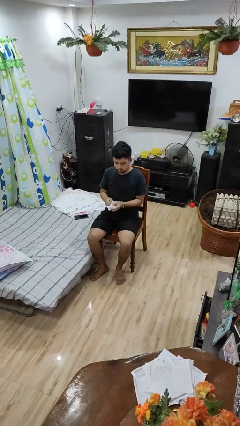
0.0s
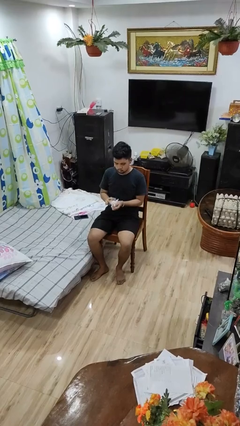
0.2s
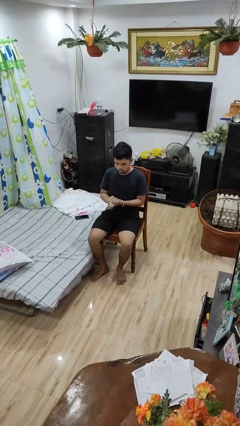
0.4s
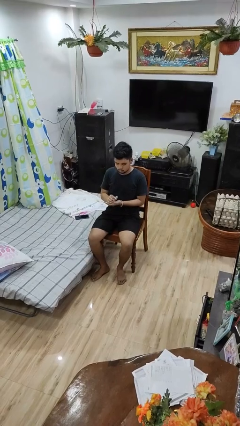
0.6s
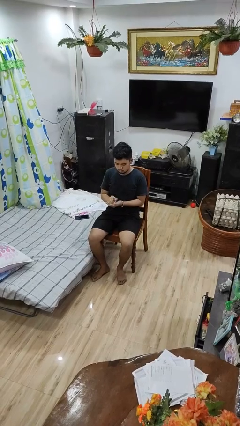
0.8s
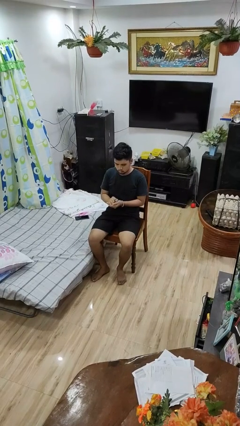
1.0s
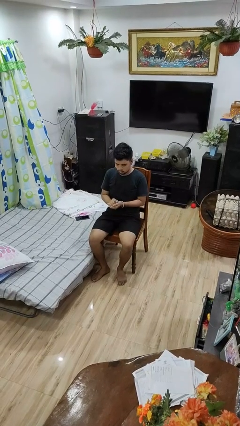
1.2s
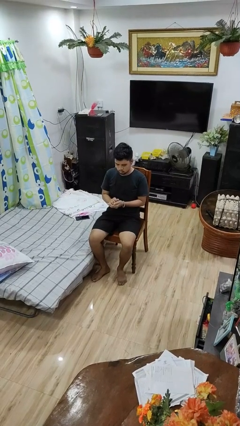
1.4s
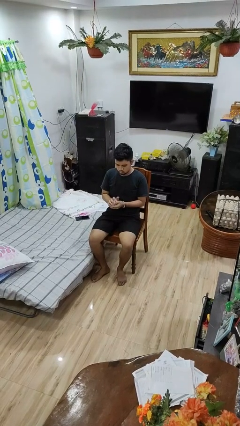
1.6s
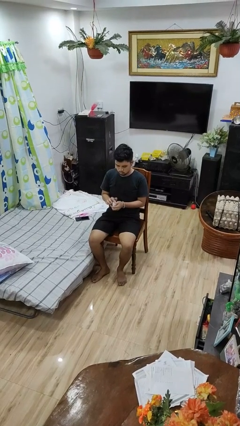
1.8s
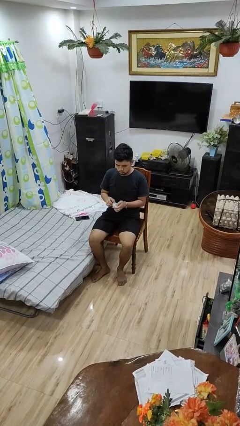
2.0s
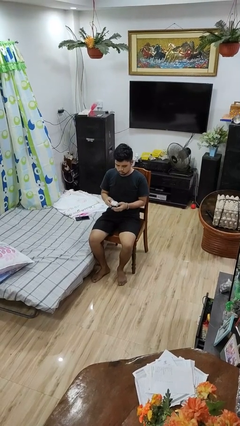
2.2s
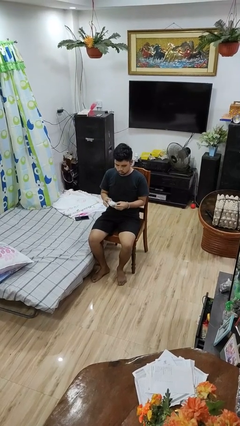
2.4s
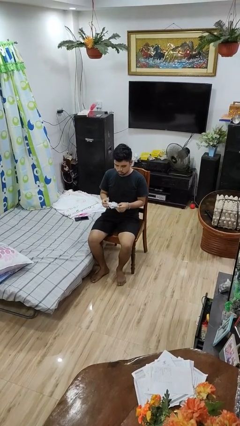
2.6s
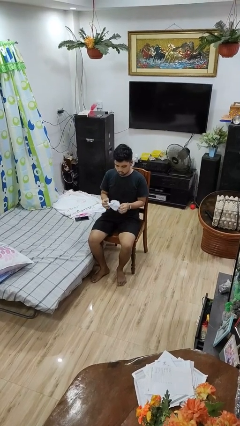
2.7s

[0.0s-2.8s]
person crumples paper

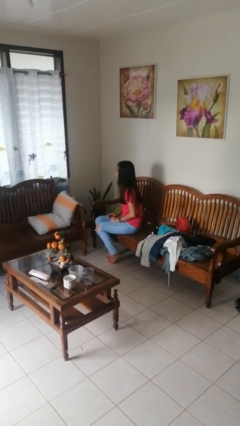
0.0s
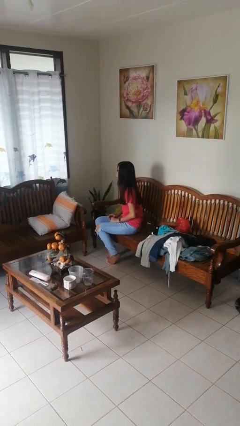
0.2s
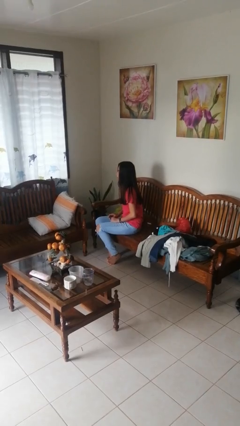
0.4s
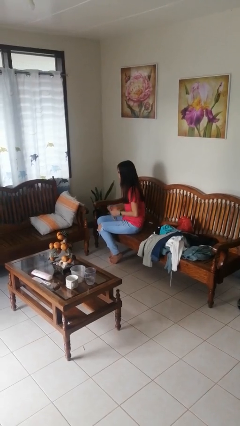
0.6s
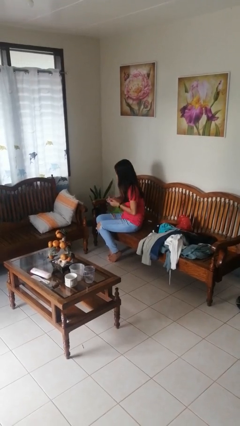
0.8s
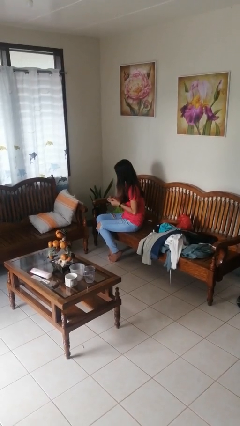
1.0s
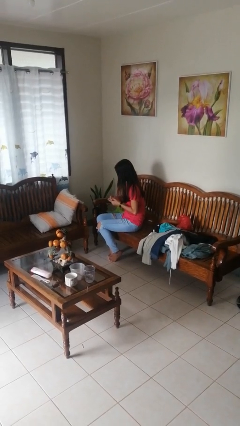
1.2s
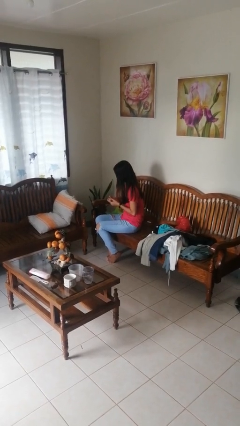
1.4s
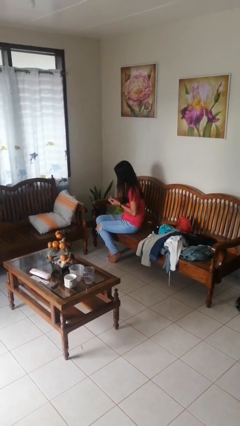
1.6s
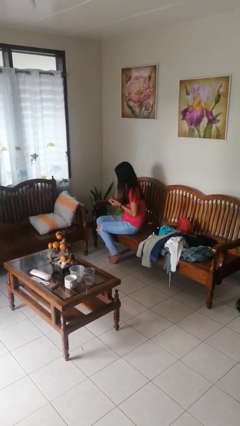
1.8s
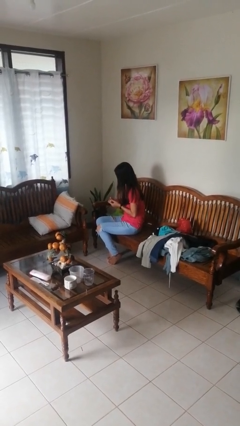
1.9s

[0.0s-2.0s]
person clips fingernails

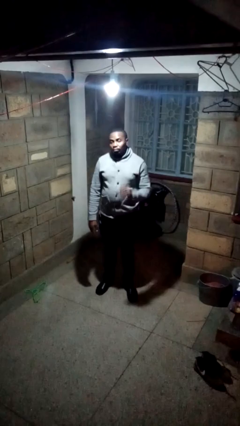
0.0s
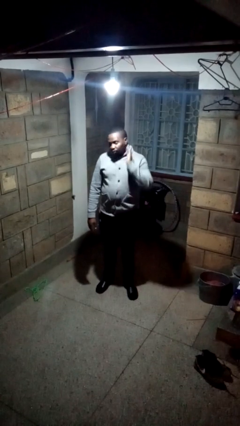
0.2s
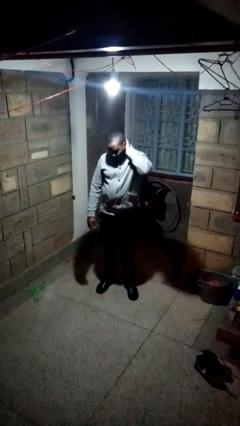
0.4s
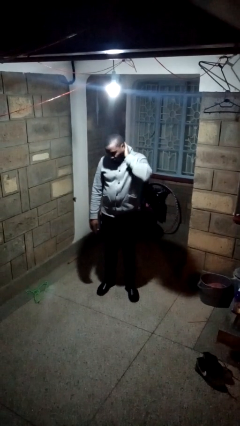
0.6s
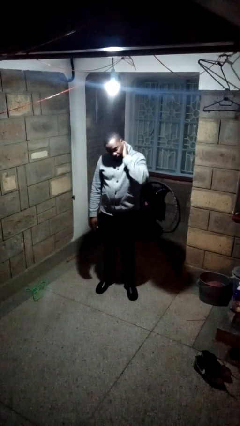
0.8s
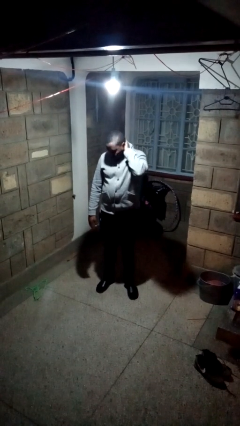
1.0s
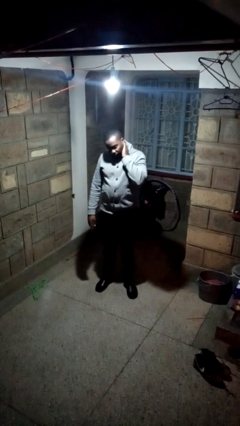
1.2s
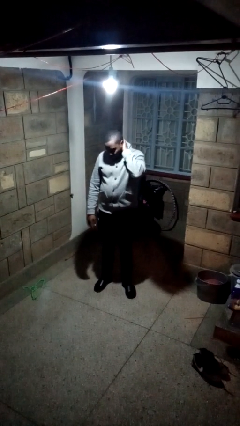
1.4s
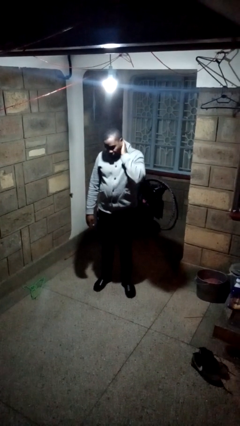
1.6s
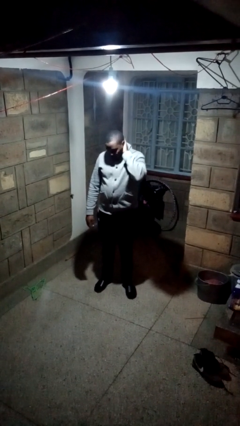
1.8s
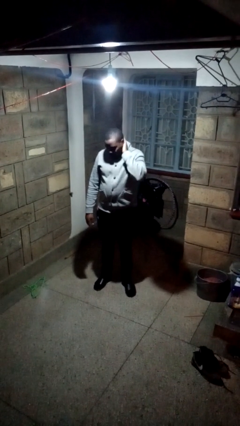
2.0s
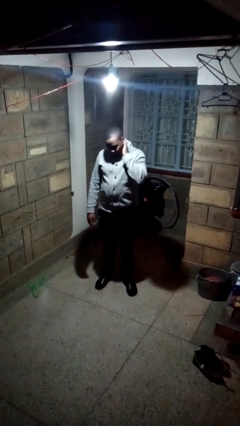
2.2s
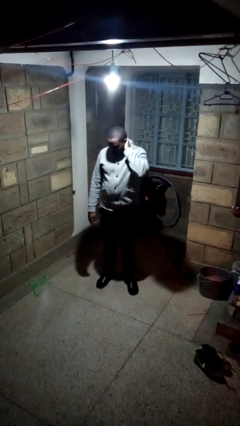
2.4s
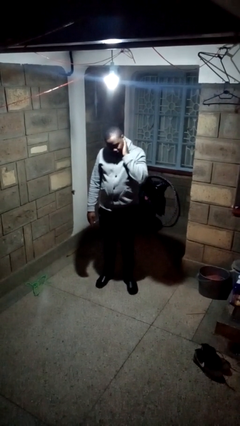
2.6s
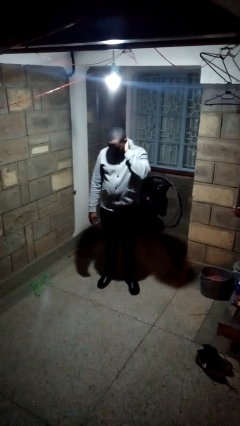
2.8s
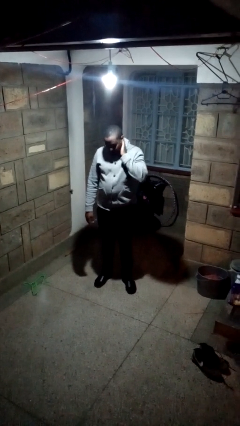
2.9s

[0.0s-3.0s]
person rubs neck

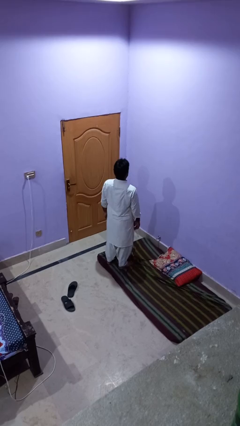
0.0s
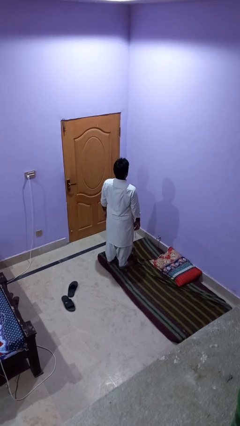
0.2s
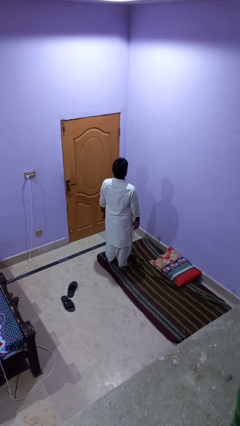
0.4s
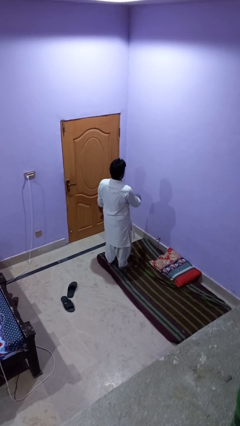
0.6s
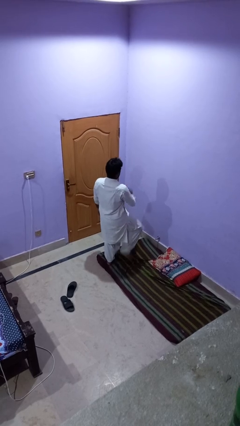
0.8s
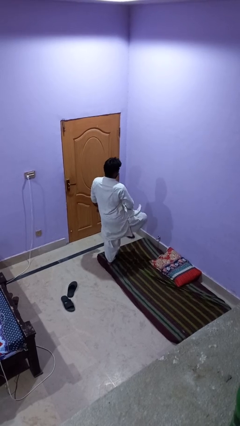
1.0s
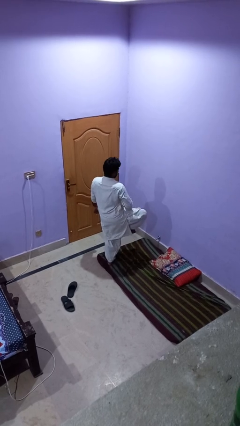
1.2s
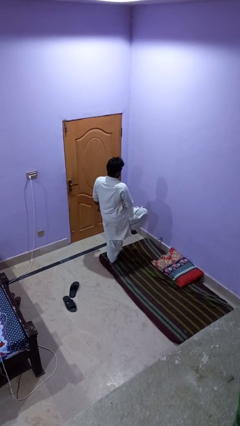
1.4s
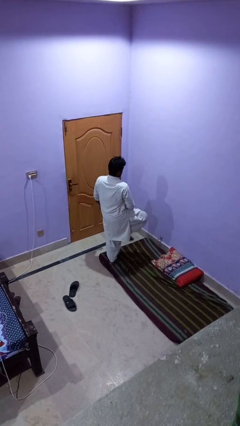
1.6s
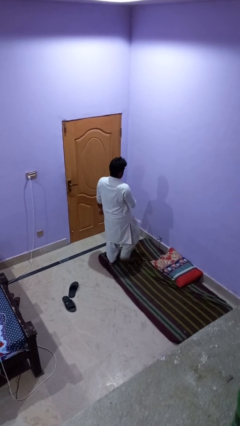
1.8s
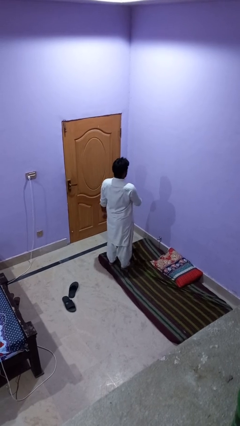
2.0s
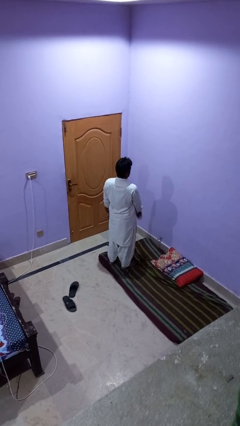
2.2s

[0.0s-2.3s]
person slaps hands on thighs

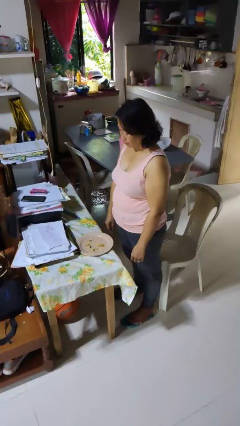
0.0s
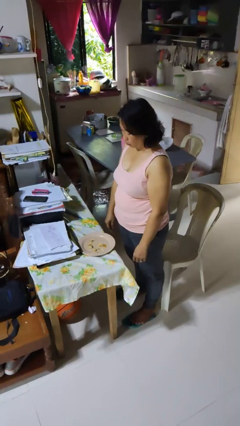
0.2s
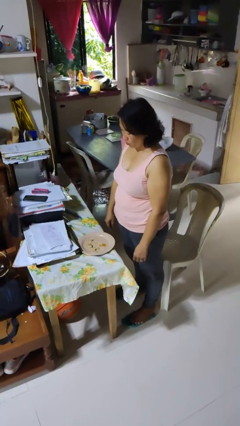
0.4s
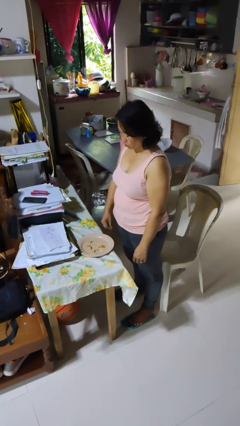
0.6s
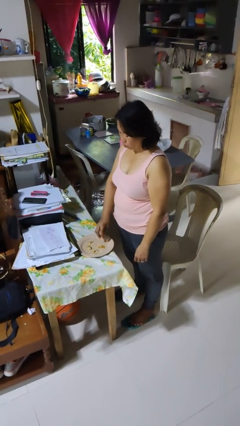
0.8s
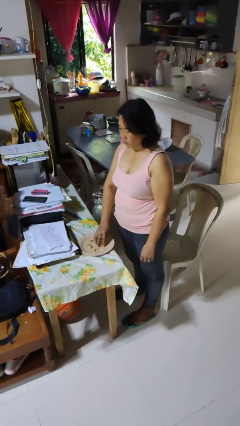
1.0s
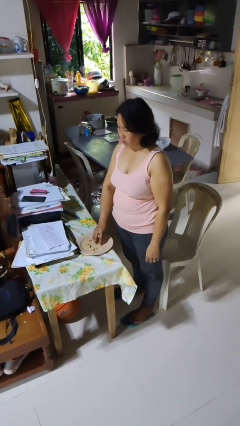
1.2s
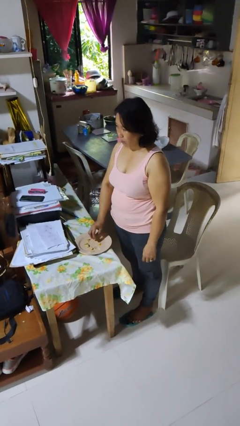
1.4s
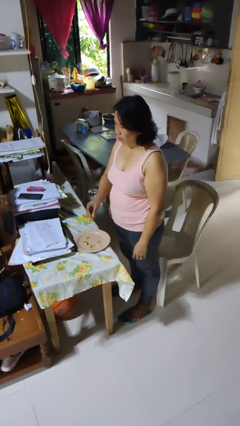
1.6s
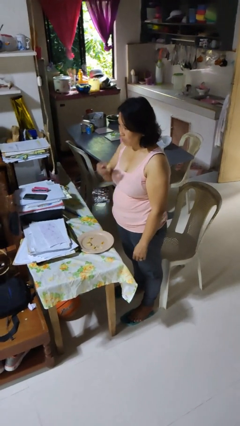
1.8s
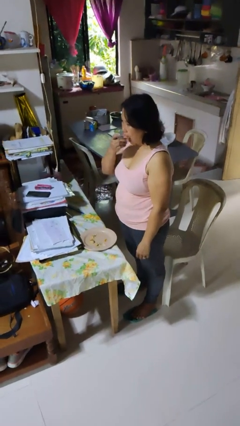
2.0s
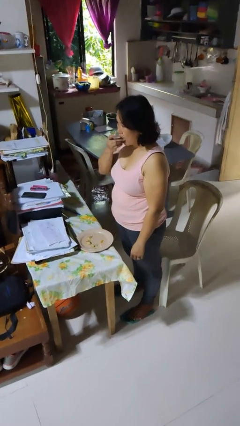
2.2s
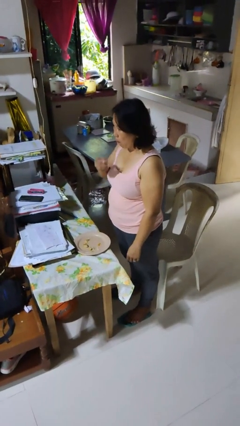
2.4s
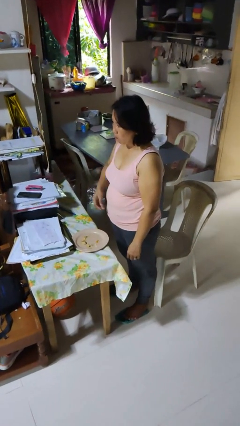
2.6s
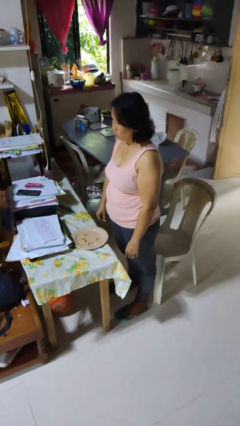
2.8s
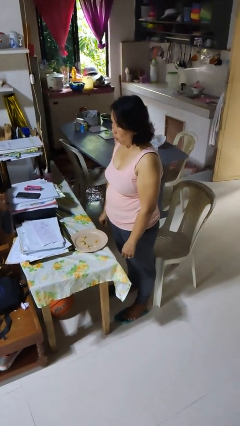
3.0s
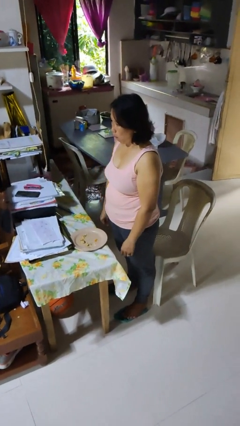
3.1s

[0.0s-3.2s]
person eats with hands

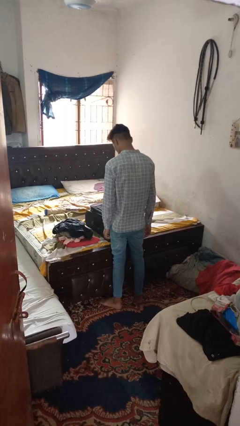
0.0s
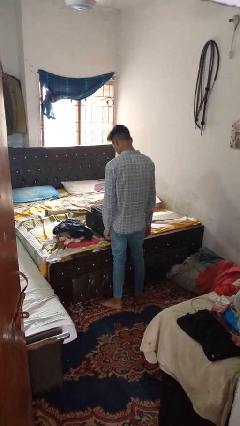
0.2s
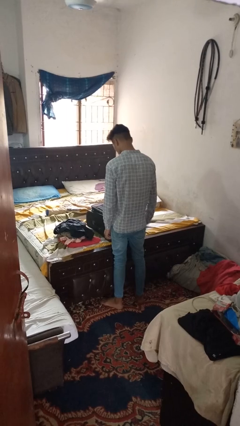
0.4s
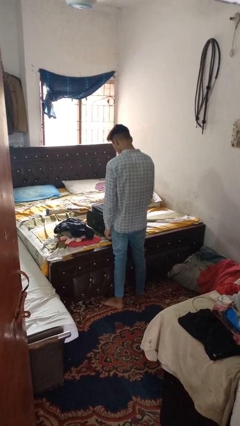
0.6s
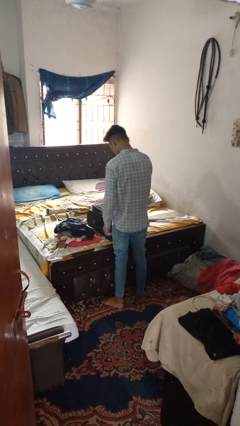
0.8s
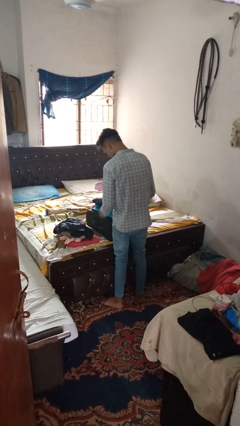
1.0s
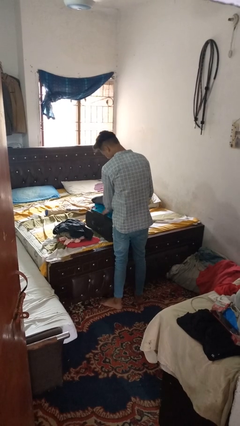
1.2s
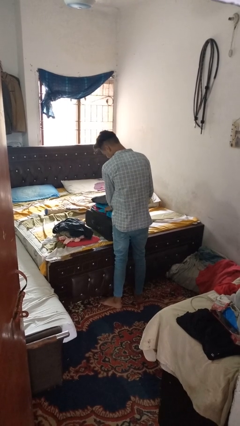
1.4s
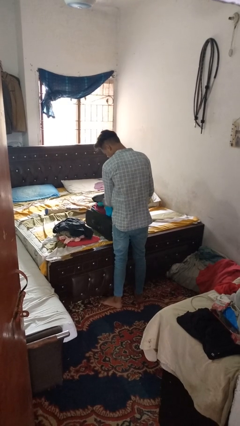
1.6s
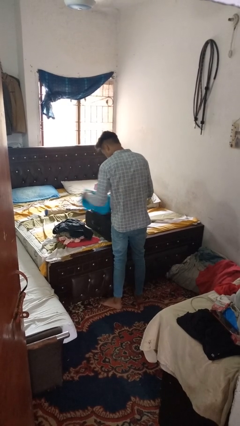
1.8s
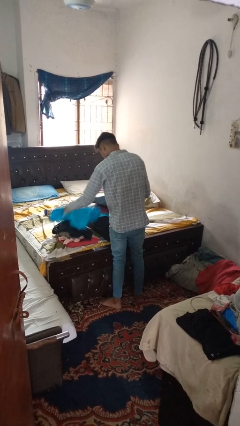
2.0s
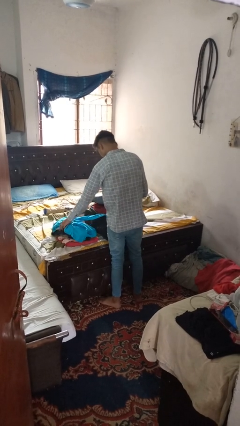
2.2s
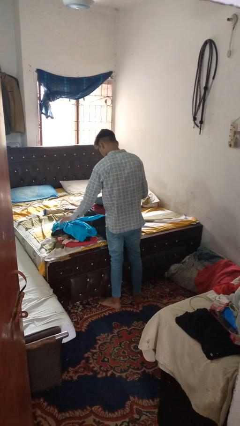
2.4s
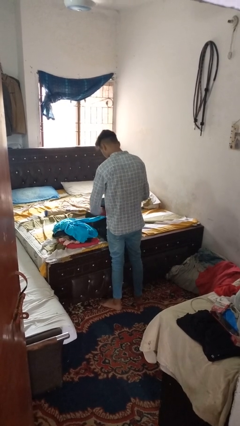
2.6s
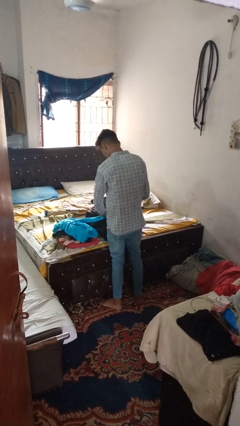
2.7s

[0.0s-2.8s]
person unloads clothes from suitcase

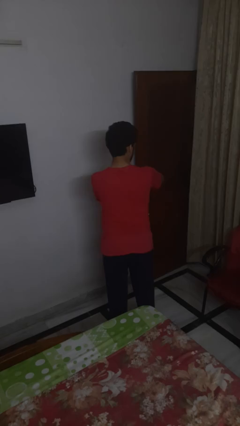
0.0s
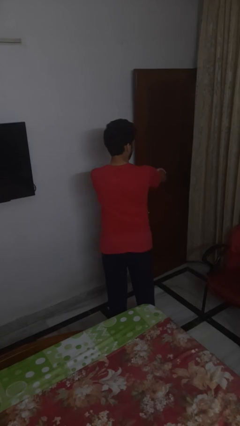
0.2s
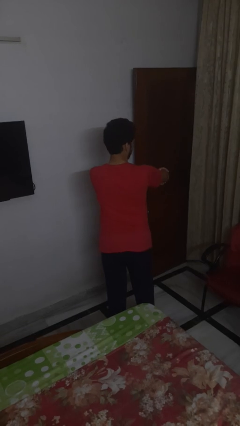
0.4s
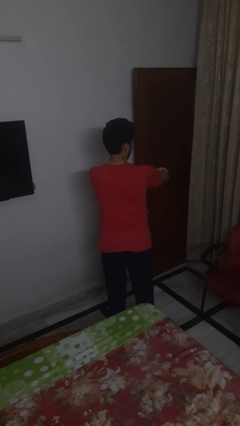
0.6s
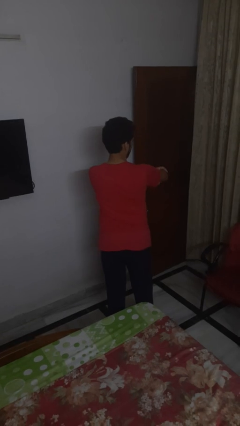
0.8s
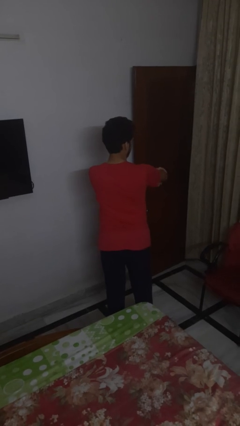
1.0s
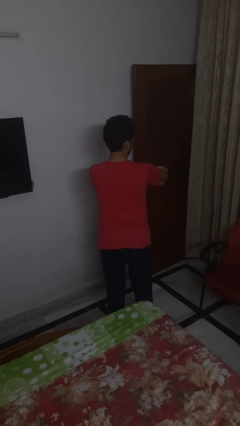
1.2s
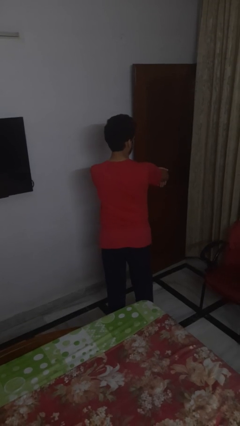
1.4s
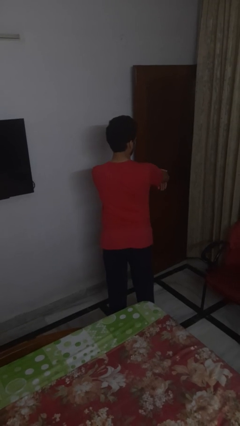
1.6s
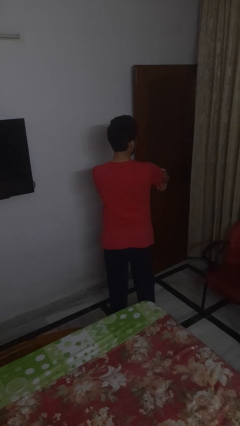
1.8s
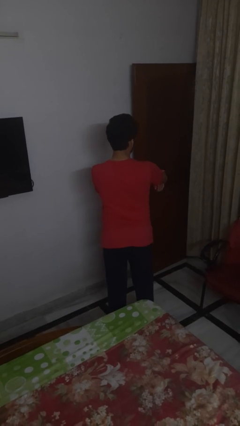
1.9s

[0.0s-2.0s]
person swats bug
